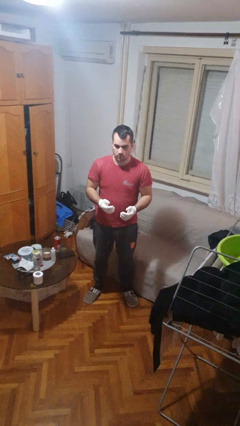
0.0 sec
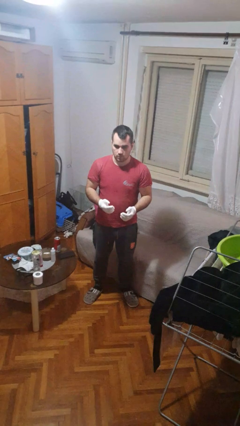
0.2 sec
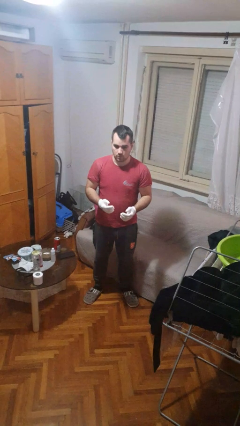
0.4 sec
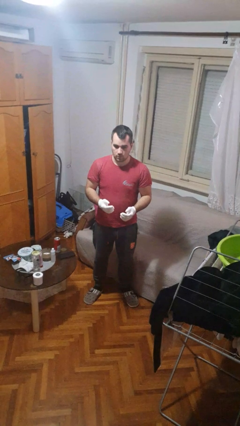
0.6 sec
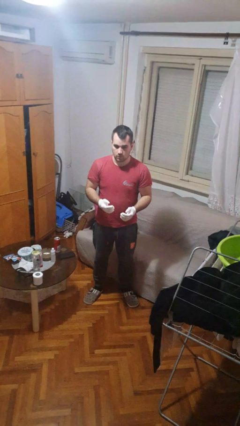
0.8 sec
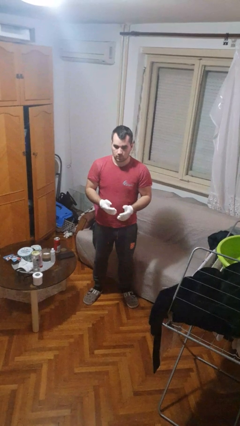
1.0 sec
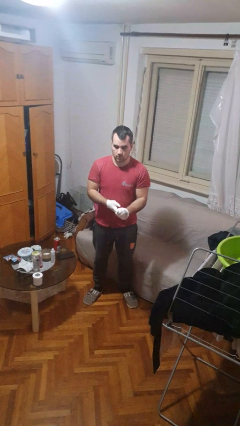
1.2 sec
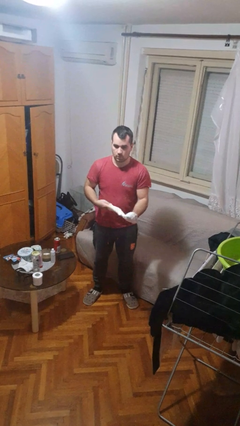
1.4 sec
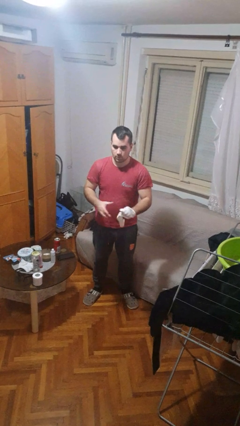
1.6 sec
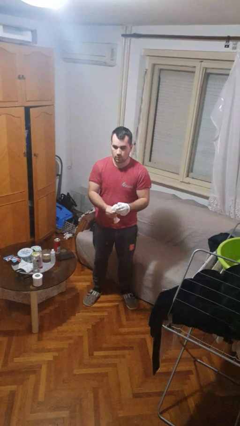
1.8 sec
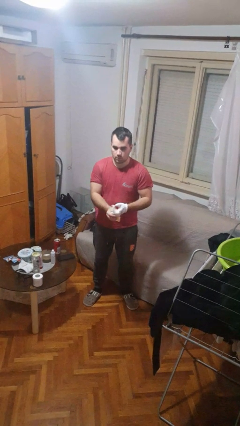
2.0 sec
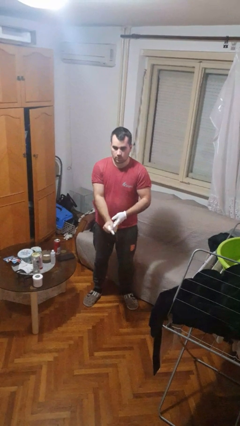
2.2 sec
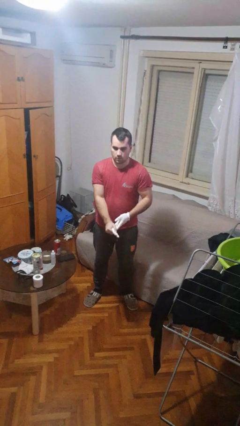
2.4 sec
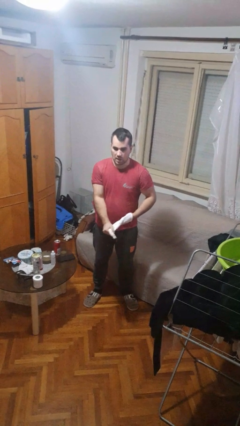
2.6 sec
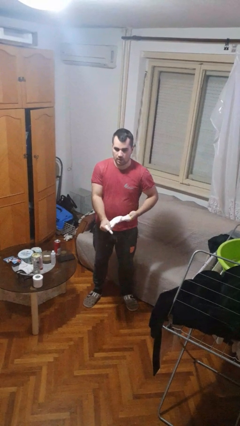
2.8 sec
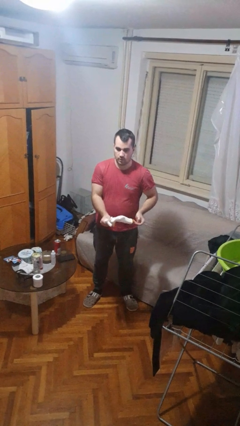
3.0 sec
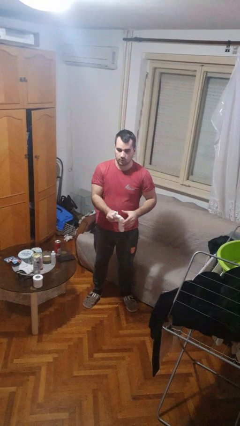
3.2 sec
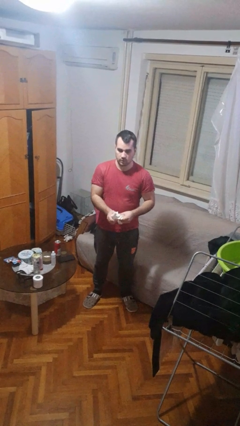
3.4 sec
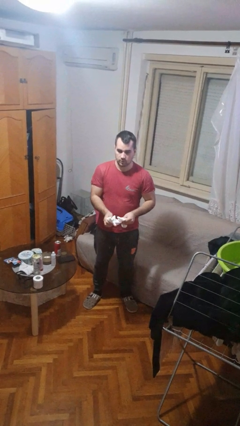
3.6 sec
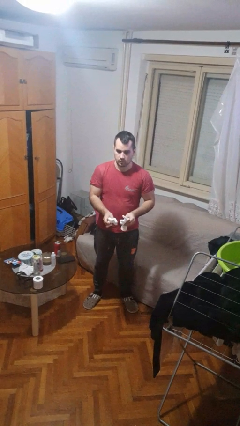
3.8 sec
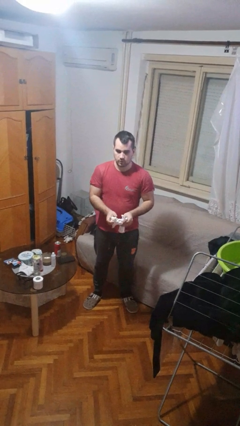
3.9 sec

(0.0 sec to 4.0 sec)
person takes off gloves

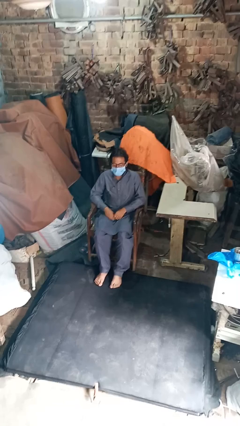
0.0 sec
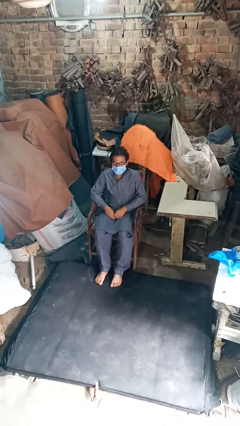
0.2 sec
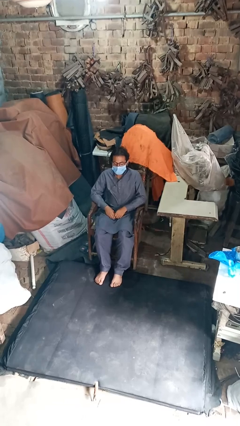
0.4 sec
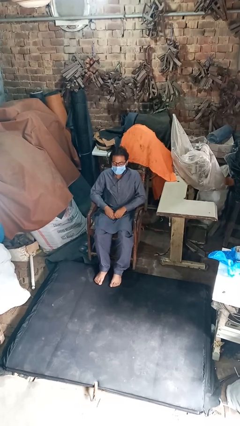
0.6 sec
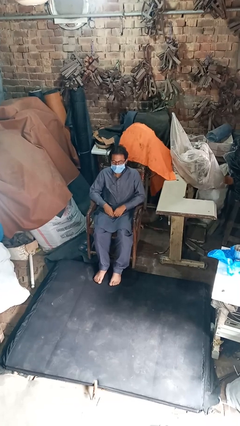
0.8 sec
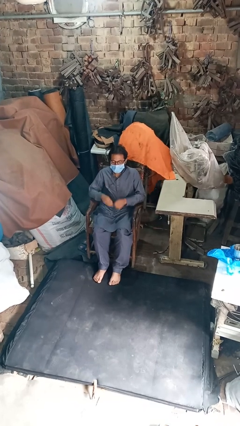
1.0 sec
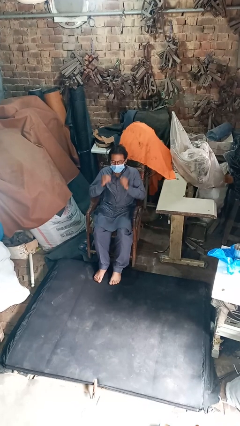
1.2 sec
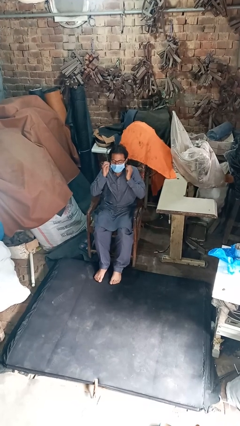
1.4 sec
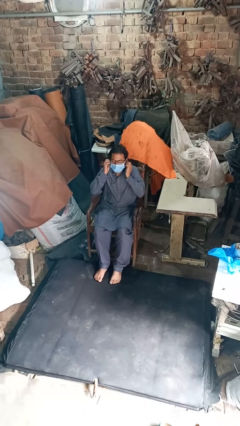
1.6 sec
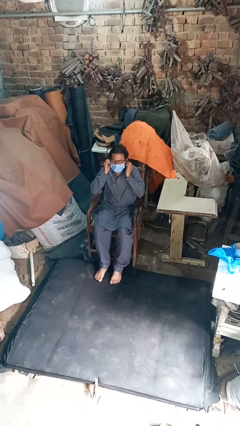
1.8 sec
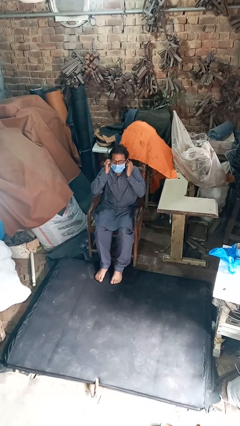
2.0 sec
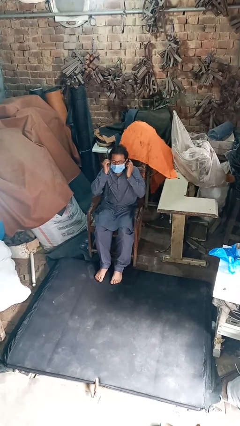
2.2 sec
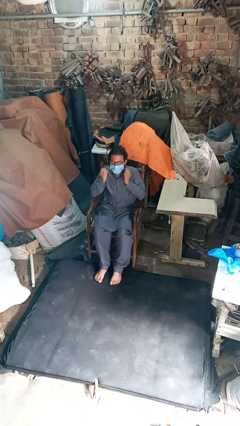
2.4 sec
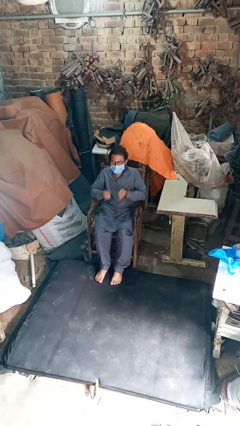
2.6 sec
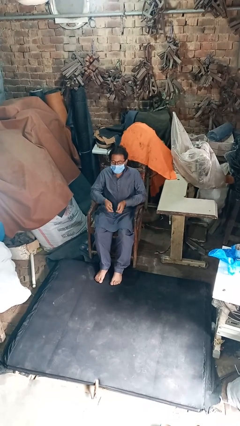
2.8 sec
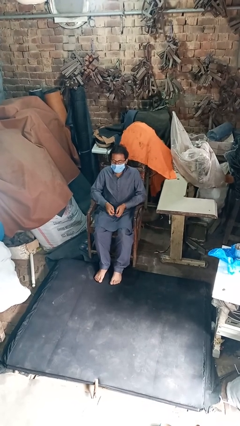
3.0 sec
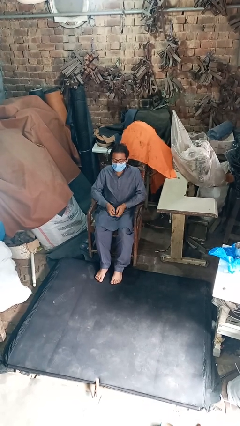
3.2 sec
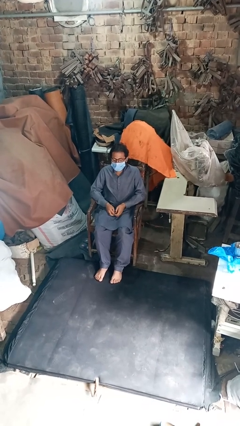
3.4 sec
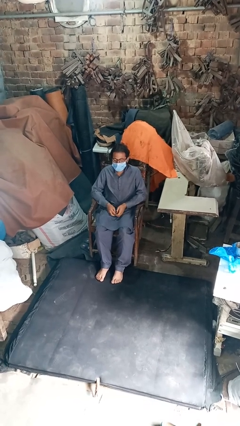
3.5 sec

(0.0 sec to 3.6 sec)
person takes off headphones

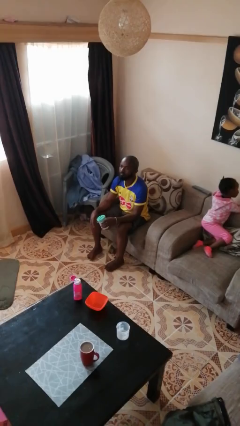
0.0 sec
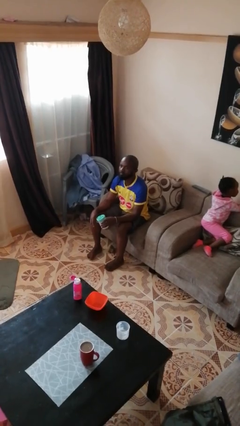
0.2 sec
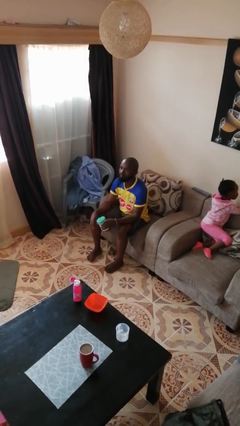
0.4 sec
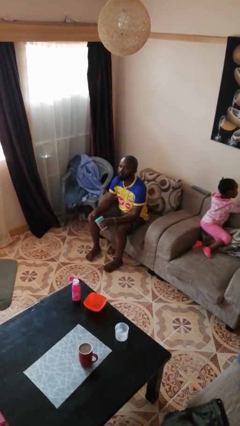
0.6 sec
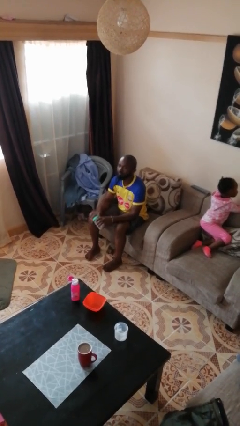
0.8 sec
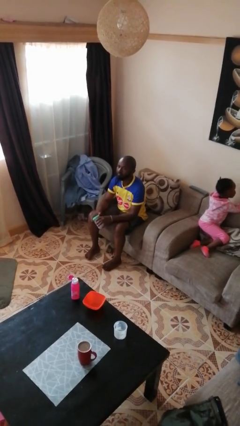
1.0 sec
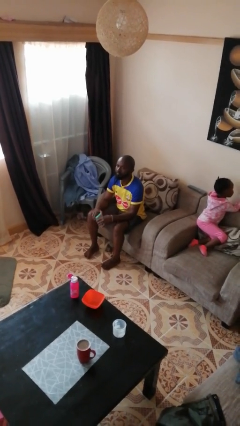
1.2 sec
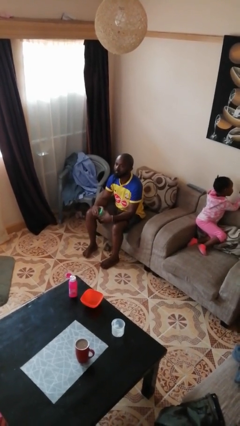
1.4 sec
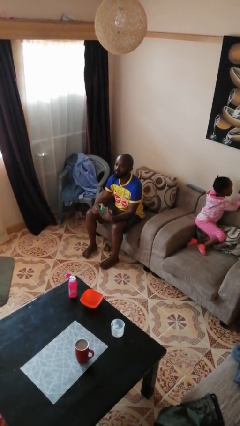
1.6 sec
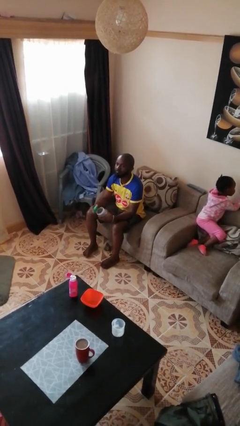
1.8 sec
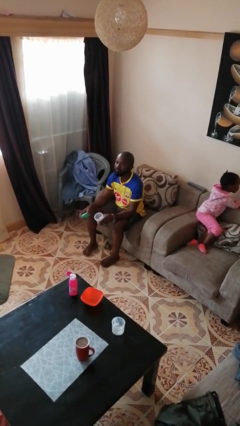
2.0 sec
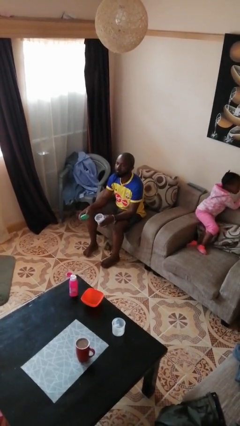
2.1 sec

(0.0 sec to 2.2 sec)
person opens jar

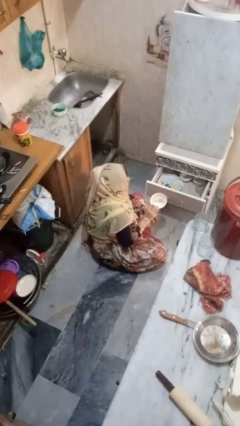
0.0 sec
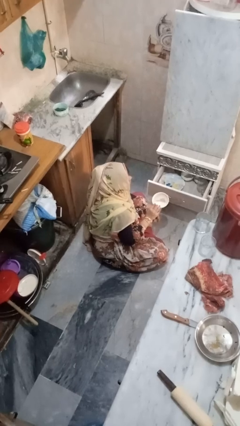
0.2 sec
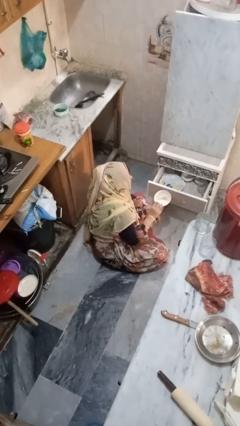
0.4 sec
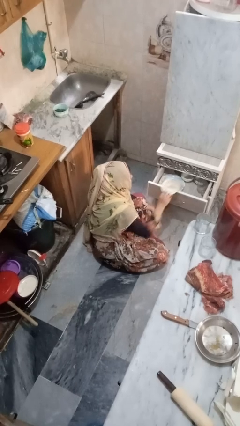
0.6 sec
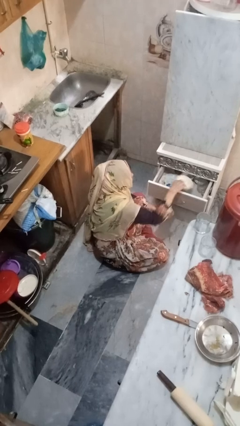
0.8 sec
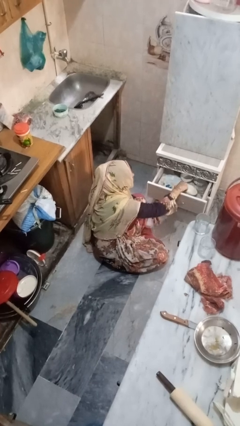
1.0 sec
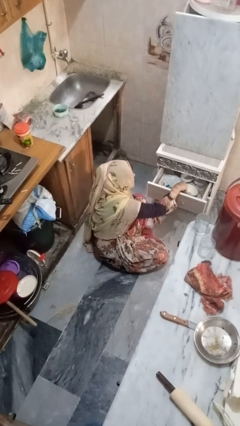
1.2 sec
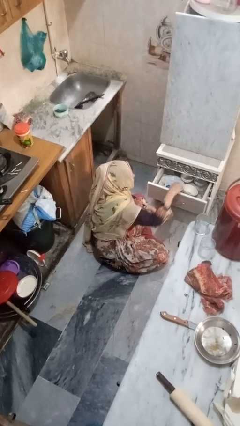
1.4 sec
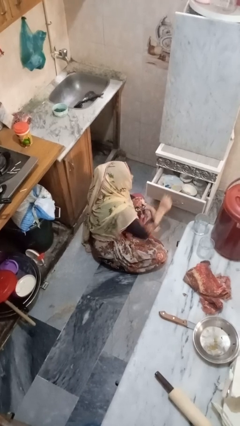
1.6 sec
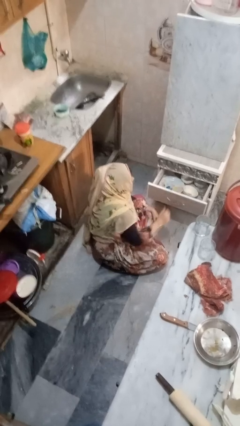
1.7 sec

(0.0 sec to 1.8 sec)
person puts object into kitchen drawer

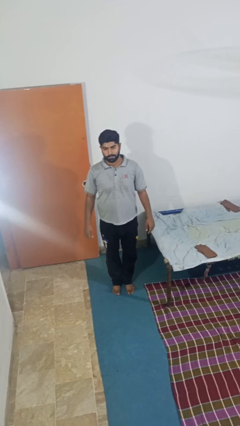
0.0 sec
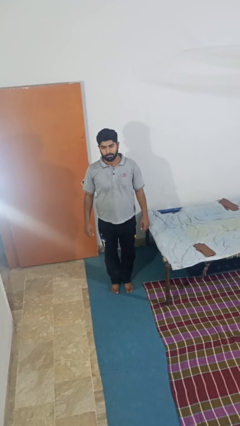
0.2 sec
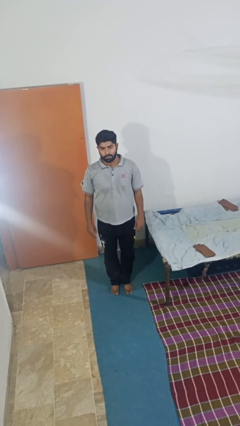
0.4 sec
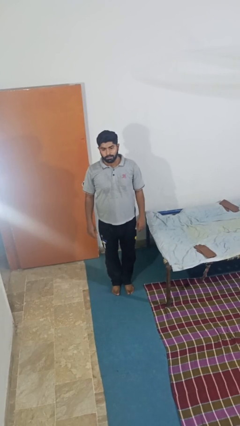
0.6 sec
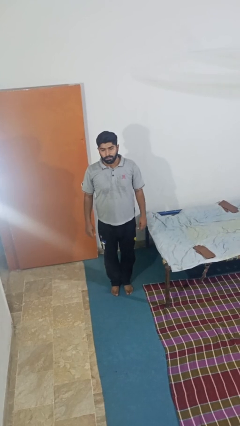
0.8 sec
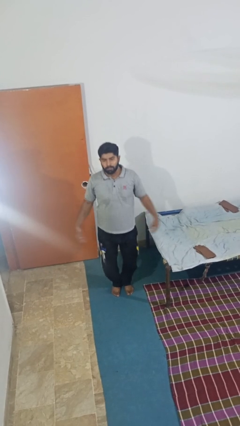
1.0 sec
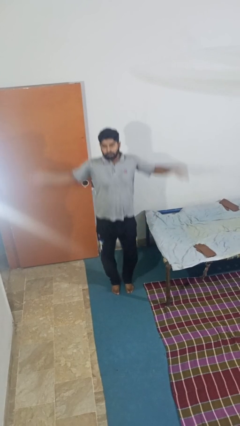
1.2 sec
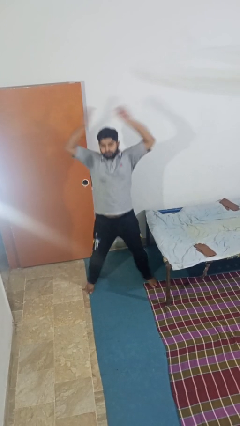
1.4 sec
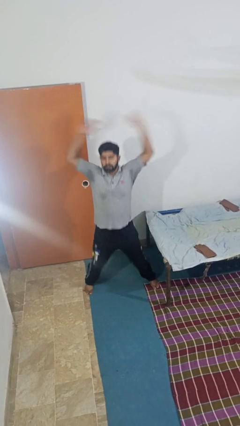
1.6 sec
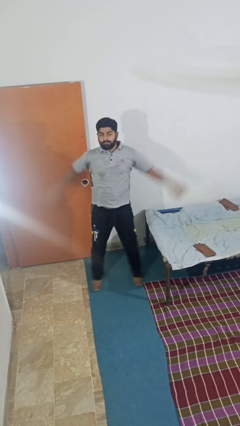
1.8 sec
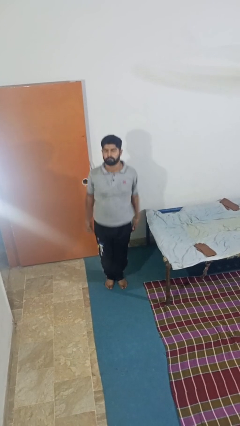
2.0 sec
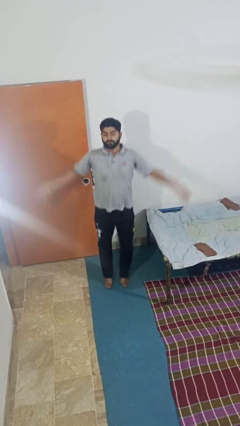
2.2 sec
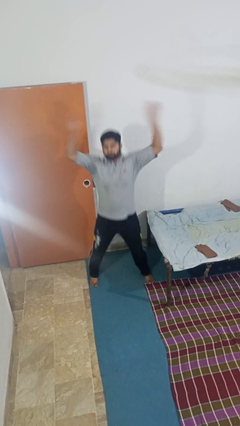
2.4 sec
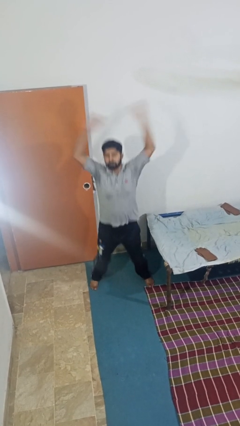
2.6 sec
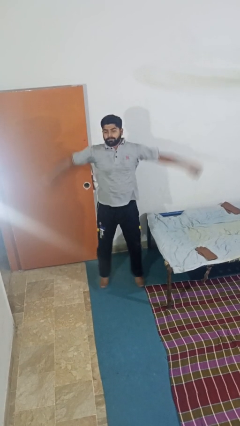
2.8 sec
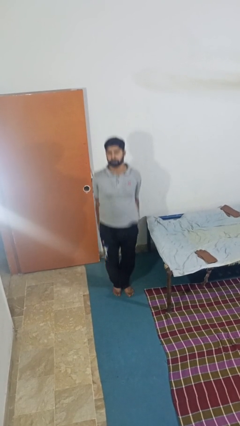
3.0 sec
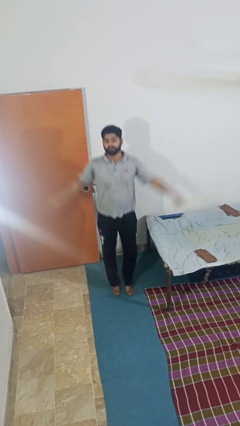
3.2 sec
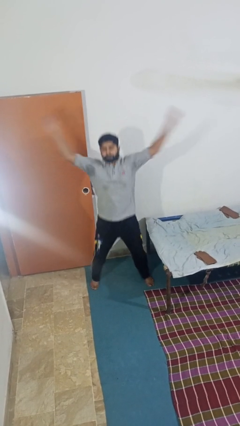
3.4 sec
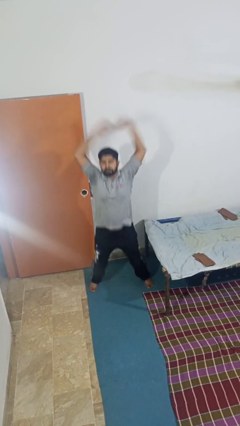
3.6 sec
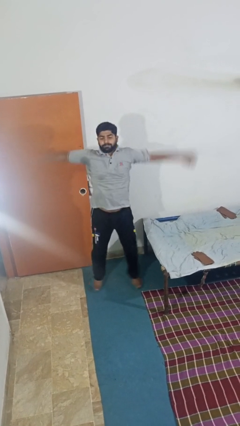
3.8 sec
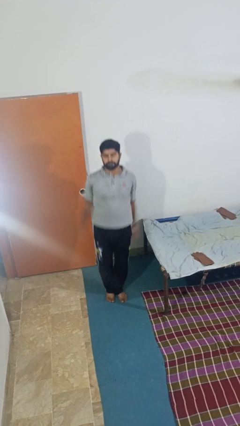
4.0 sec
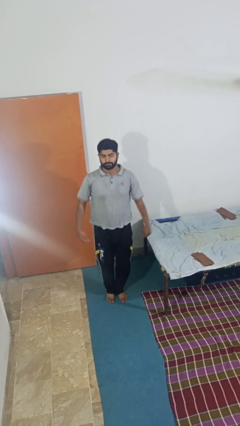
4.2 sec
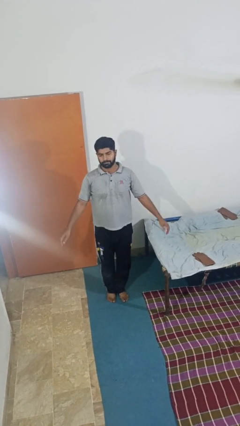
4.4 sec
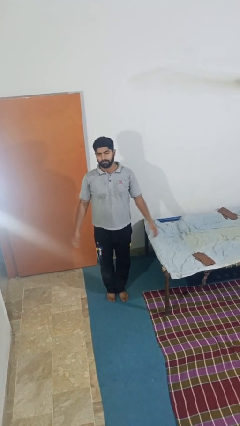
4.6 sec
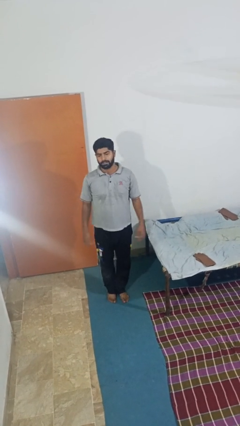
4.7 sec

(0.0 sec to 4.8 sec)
person exercises with jumping jacks

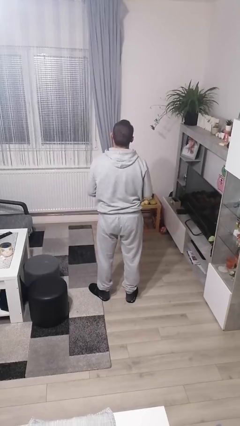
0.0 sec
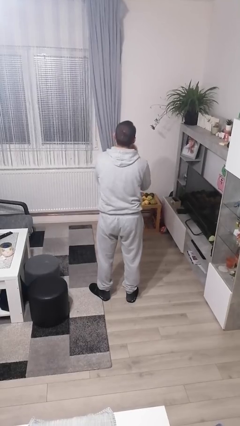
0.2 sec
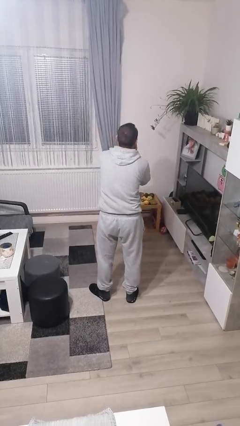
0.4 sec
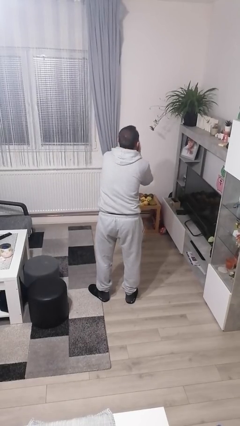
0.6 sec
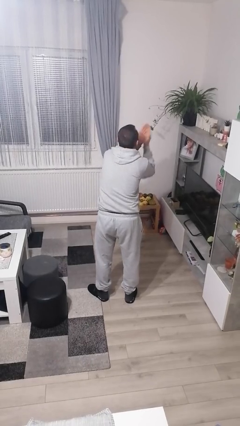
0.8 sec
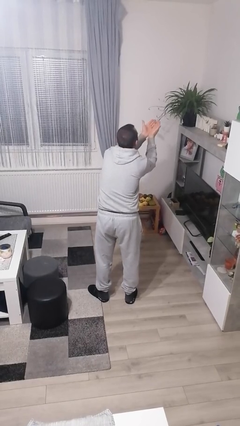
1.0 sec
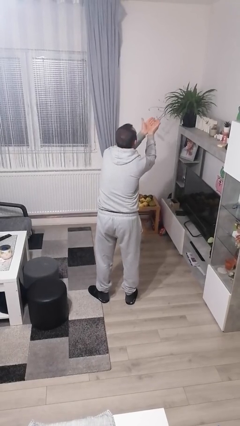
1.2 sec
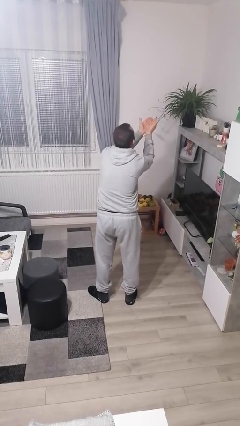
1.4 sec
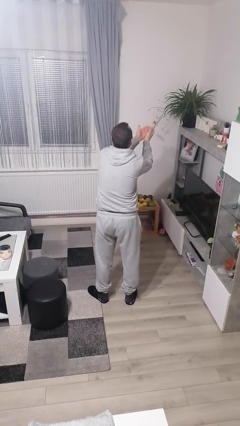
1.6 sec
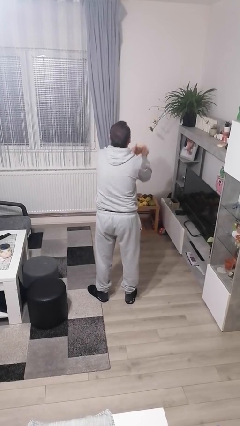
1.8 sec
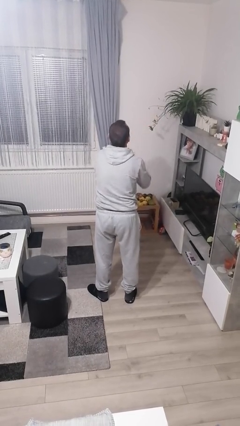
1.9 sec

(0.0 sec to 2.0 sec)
person gestures blow kiss
